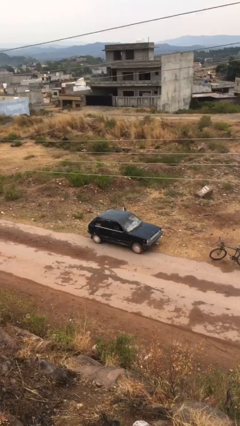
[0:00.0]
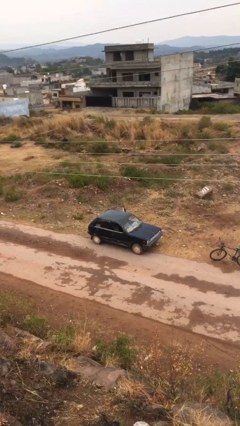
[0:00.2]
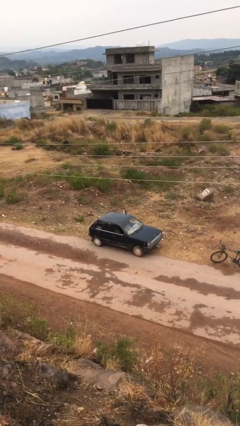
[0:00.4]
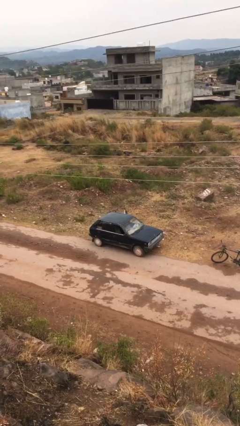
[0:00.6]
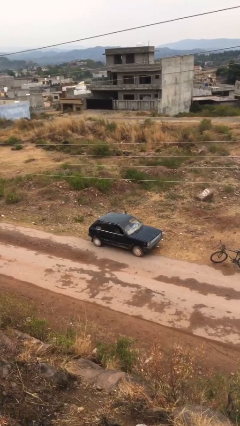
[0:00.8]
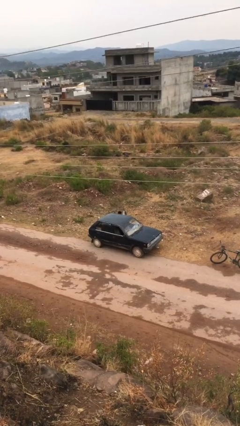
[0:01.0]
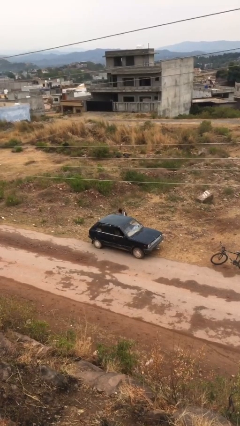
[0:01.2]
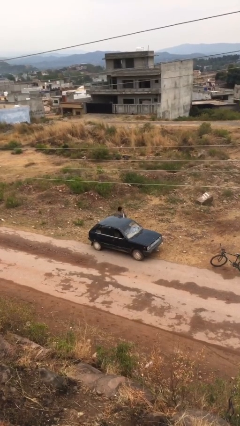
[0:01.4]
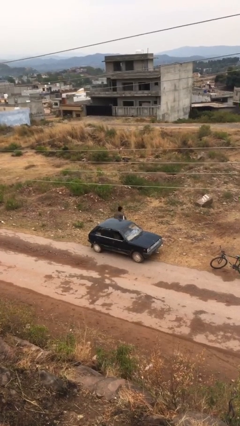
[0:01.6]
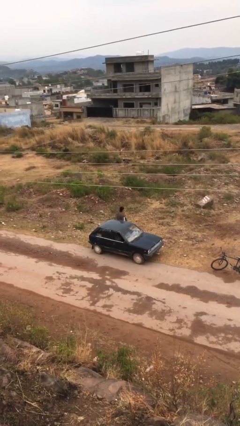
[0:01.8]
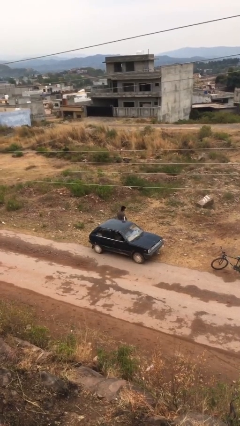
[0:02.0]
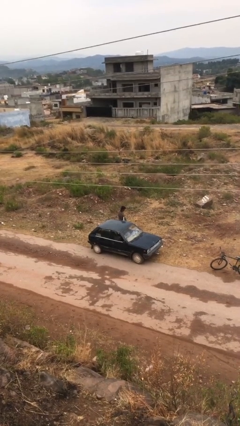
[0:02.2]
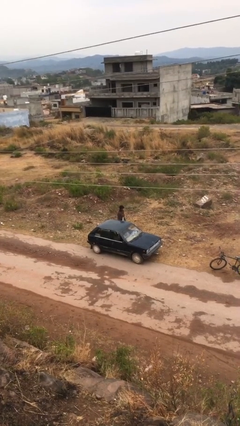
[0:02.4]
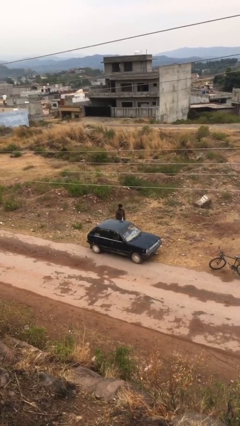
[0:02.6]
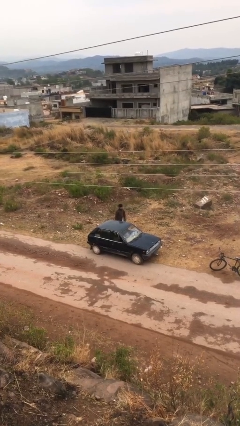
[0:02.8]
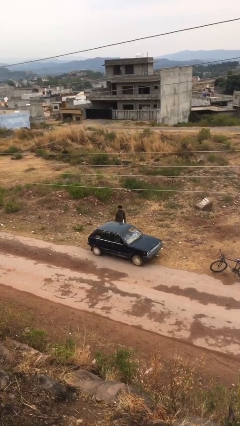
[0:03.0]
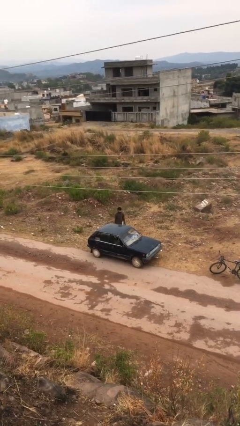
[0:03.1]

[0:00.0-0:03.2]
person exits car

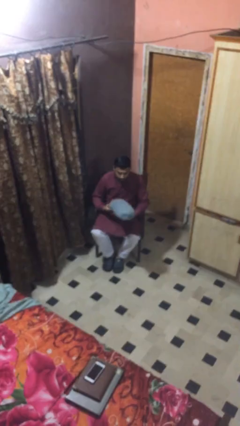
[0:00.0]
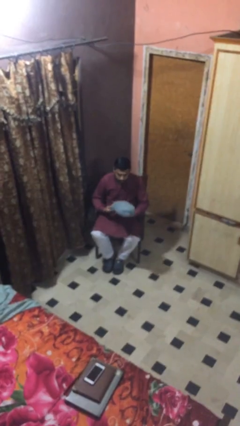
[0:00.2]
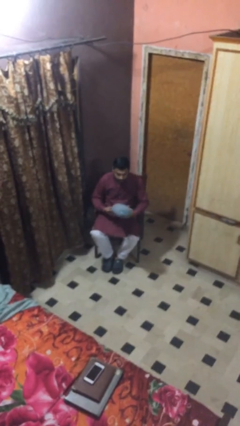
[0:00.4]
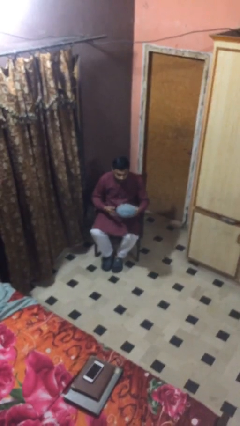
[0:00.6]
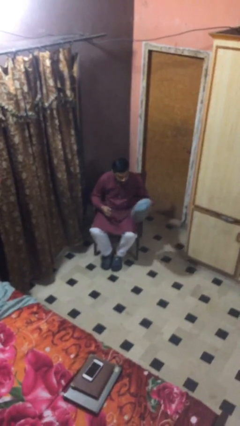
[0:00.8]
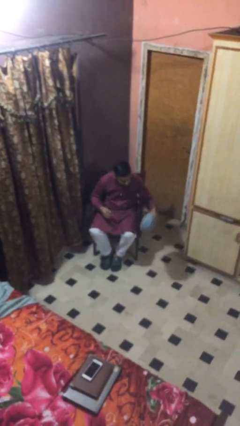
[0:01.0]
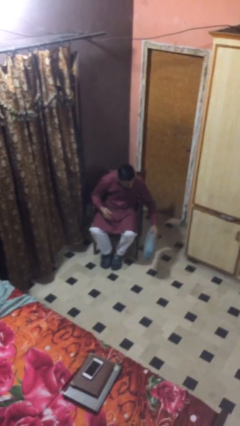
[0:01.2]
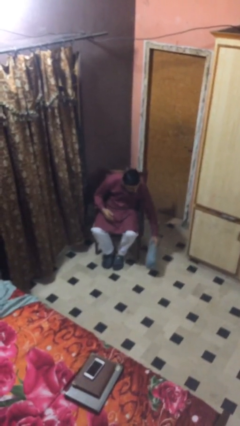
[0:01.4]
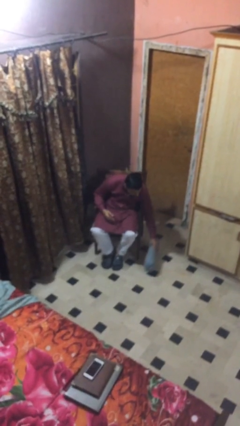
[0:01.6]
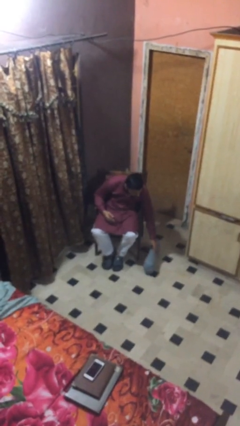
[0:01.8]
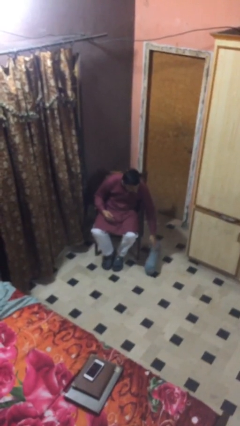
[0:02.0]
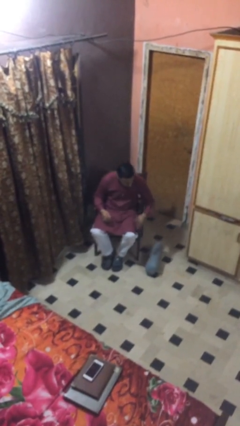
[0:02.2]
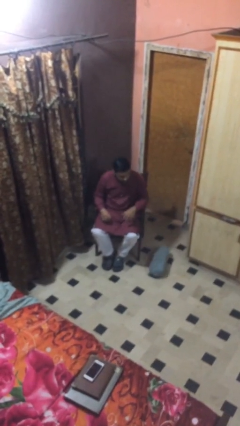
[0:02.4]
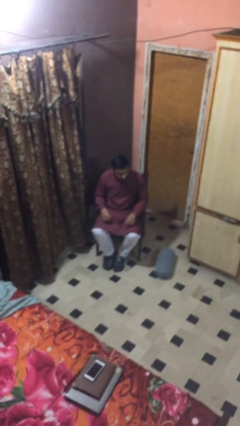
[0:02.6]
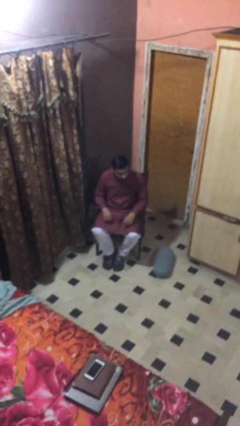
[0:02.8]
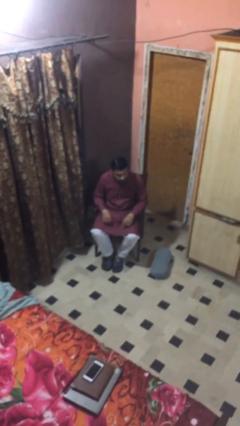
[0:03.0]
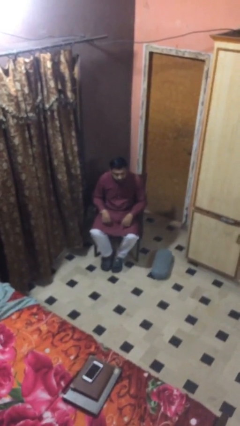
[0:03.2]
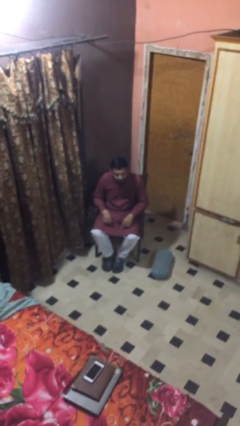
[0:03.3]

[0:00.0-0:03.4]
person puts down object on floor

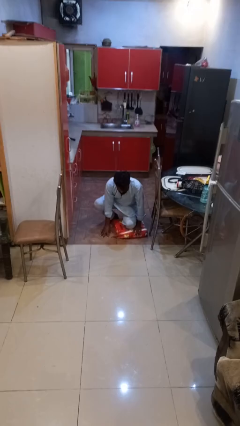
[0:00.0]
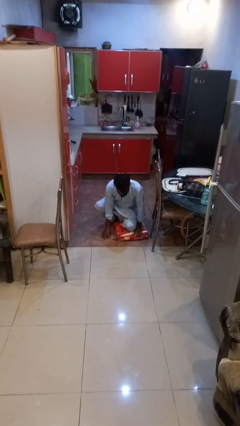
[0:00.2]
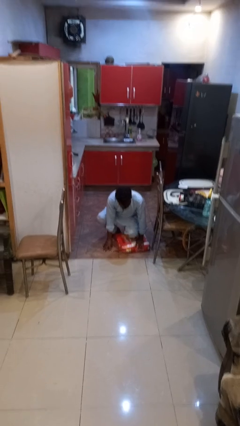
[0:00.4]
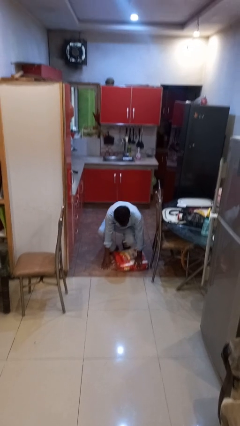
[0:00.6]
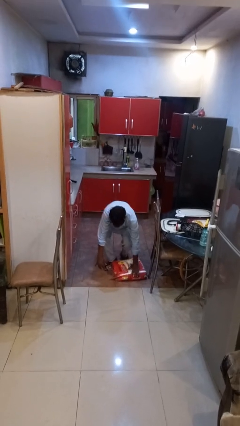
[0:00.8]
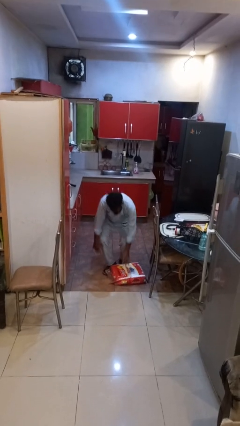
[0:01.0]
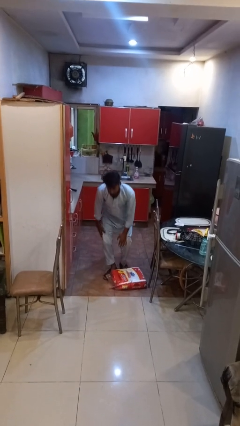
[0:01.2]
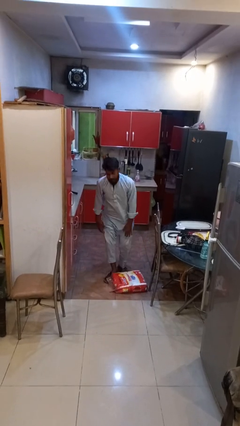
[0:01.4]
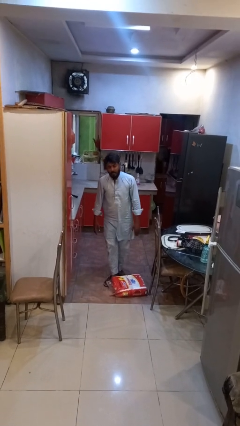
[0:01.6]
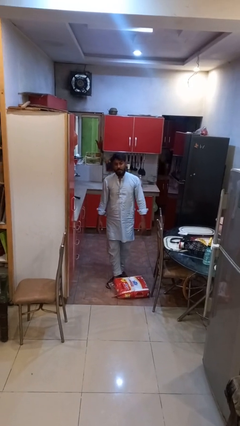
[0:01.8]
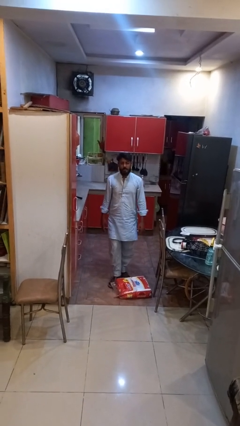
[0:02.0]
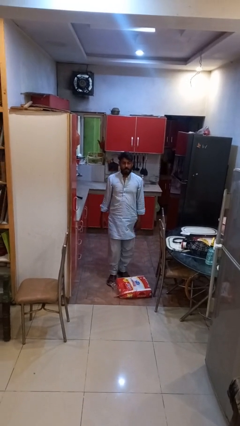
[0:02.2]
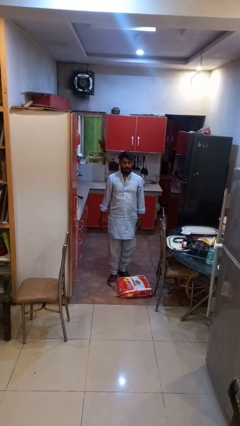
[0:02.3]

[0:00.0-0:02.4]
person stands up from floor

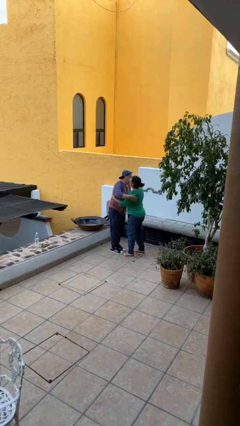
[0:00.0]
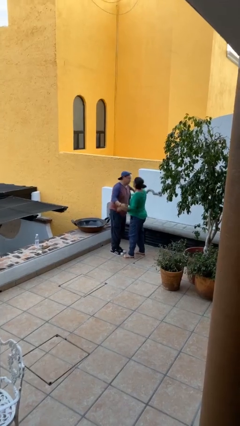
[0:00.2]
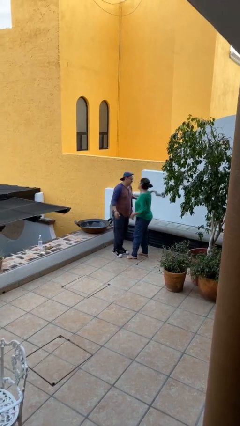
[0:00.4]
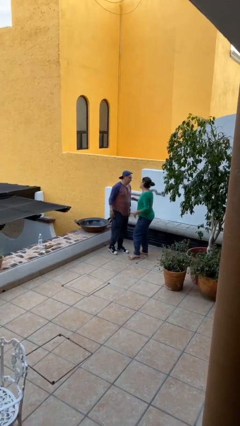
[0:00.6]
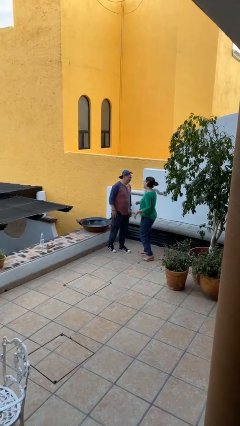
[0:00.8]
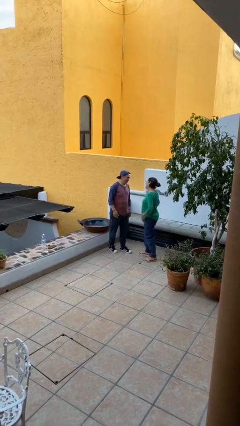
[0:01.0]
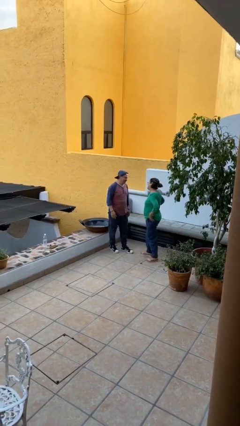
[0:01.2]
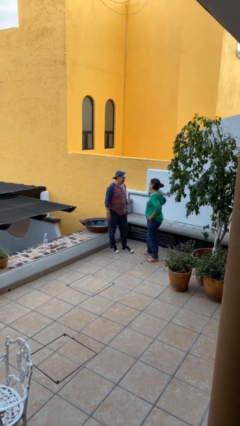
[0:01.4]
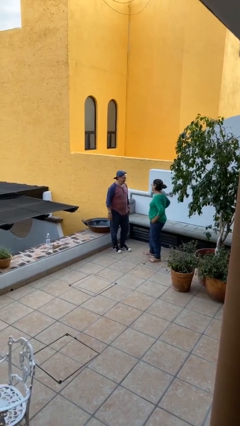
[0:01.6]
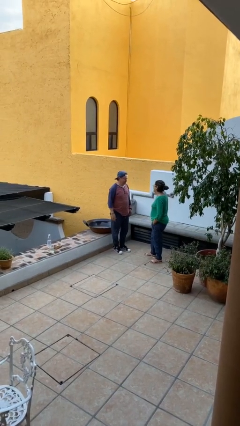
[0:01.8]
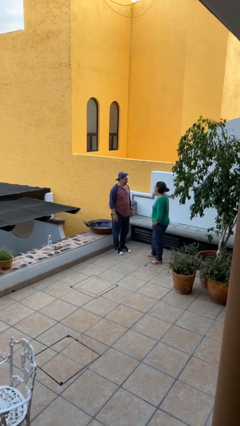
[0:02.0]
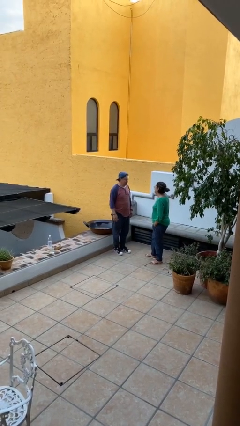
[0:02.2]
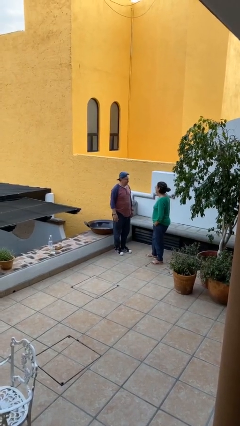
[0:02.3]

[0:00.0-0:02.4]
person talks to person

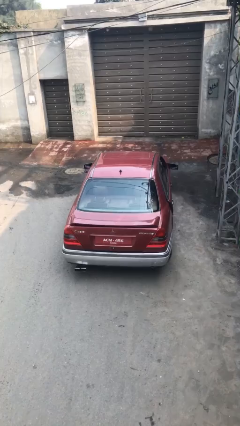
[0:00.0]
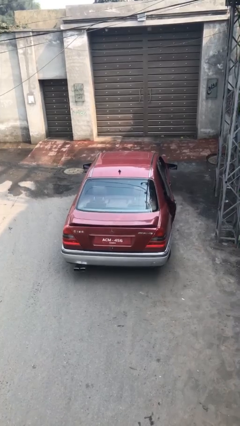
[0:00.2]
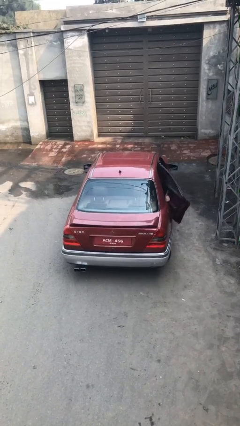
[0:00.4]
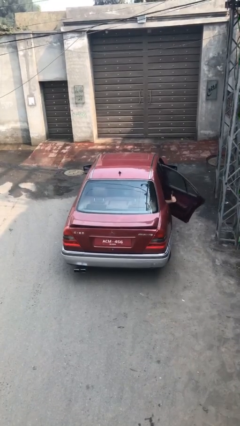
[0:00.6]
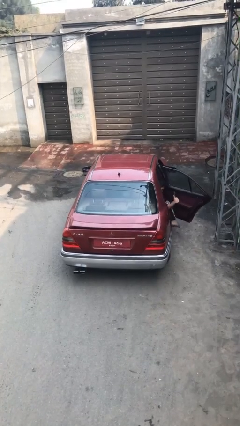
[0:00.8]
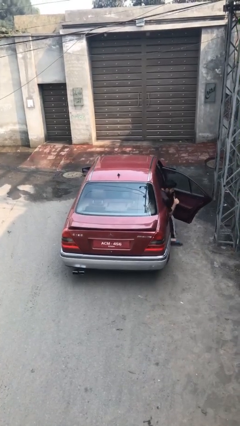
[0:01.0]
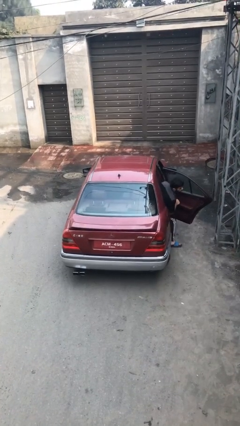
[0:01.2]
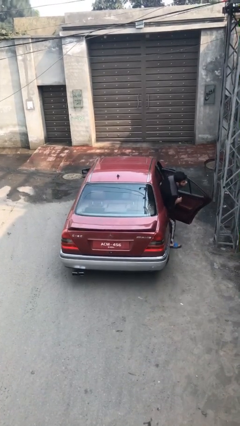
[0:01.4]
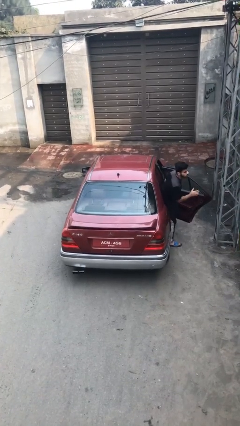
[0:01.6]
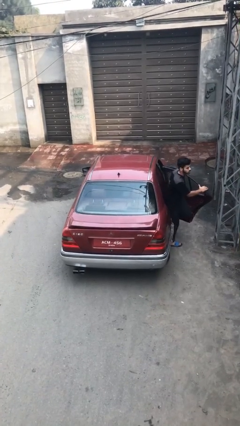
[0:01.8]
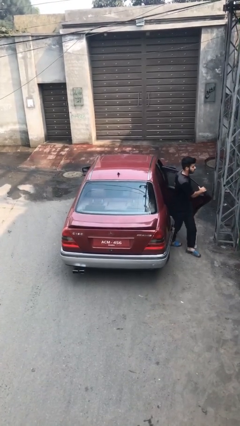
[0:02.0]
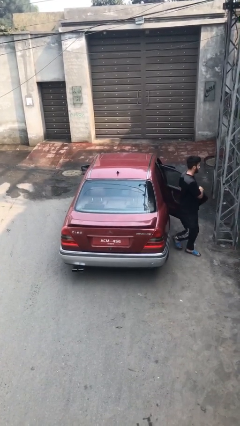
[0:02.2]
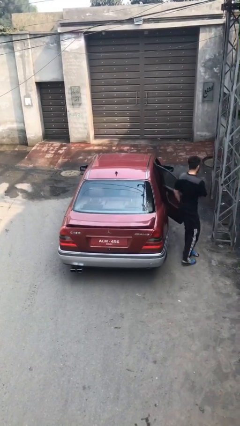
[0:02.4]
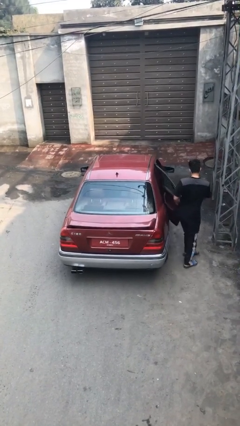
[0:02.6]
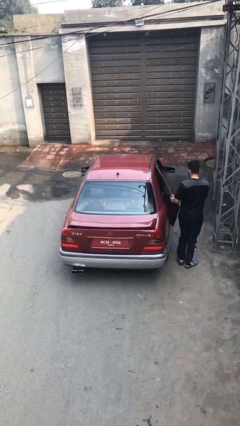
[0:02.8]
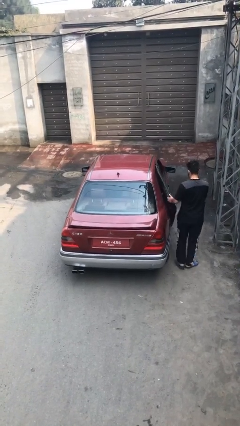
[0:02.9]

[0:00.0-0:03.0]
car drops off person

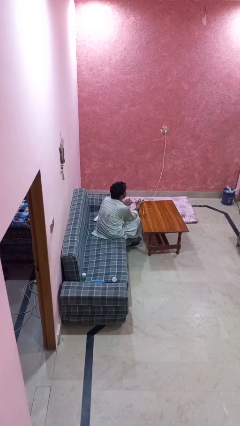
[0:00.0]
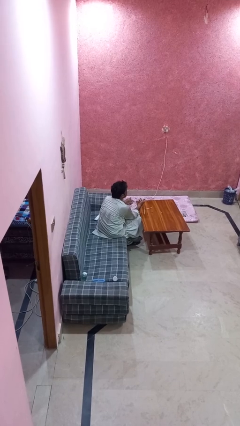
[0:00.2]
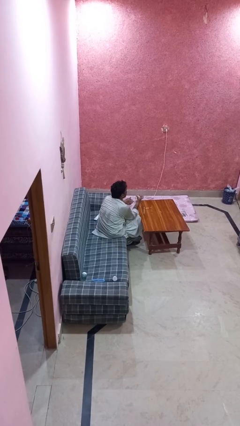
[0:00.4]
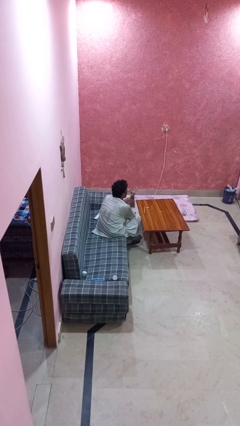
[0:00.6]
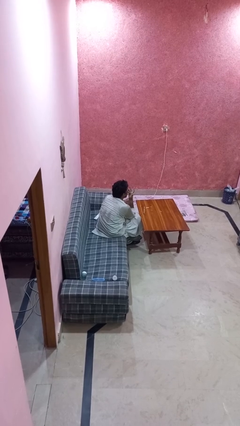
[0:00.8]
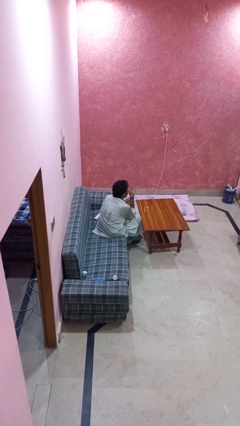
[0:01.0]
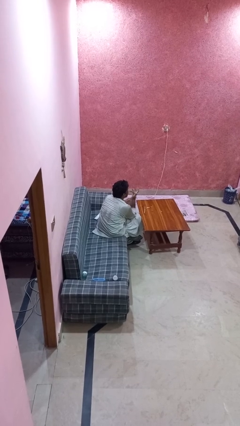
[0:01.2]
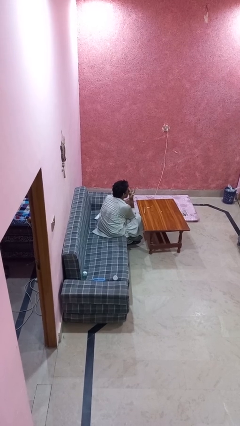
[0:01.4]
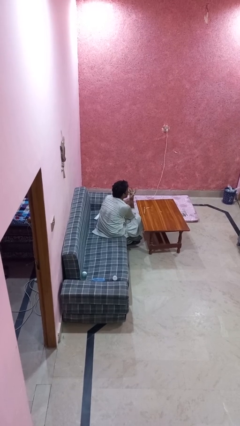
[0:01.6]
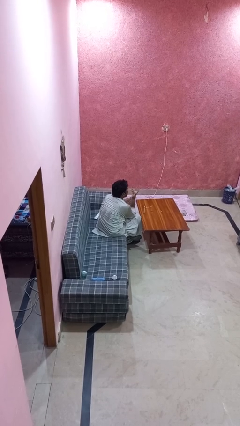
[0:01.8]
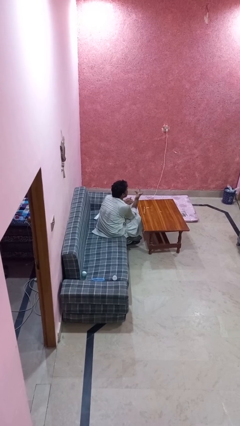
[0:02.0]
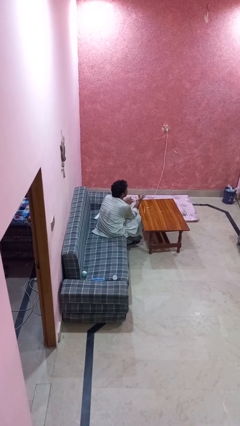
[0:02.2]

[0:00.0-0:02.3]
person licks fingers

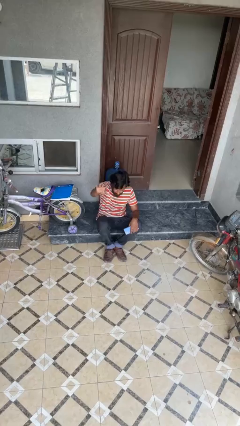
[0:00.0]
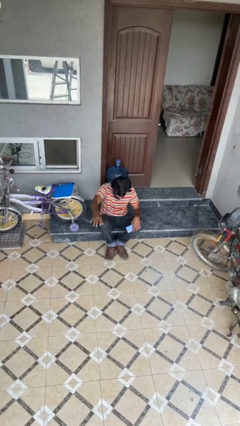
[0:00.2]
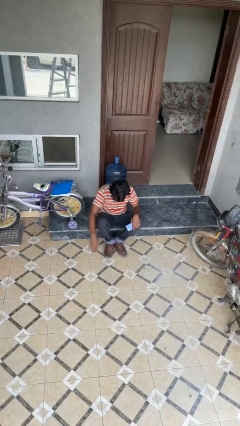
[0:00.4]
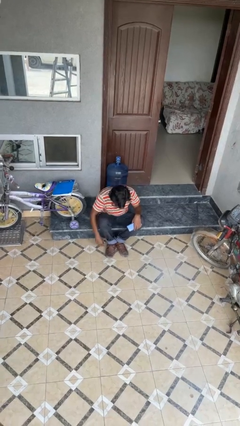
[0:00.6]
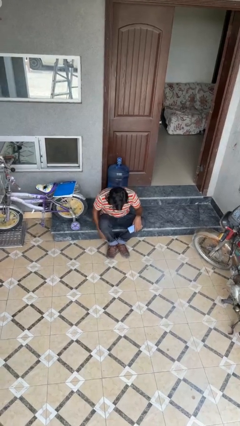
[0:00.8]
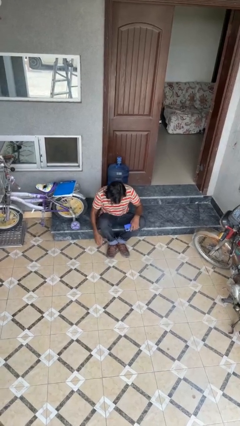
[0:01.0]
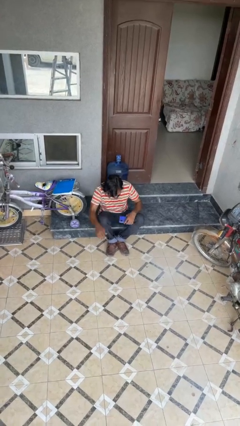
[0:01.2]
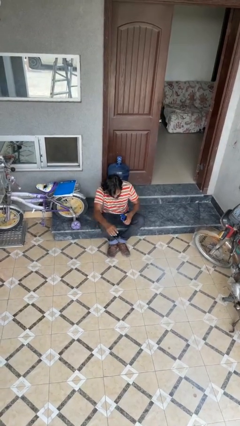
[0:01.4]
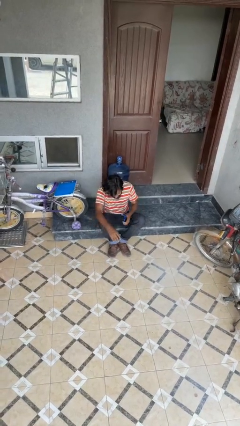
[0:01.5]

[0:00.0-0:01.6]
person gestures lower hand
